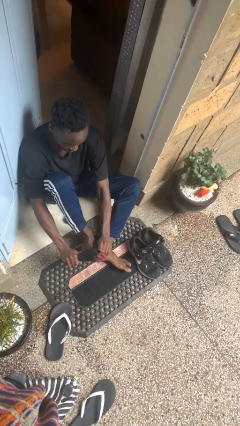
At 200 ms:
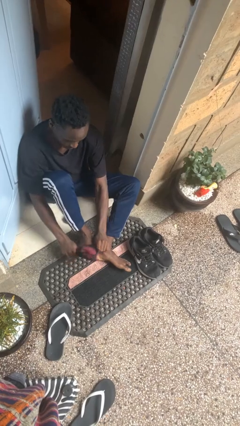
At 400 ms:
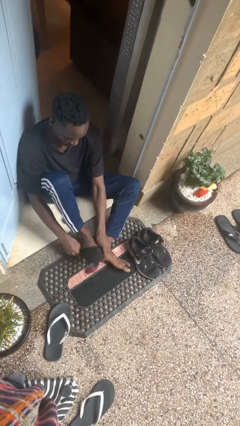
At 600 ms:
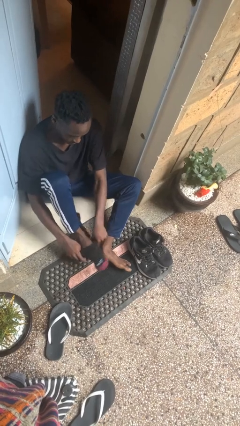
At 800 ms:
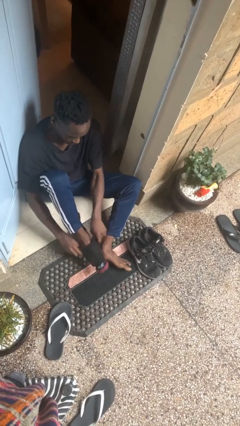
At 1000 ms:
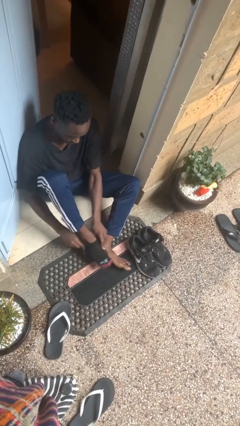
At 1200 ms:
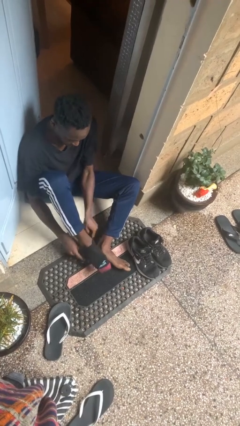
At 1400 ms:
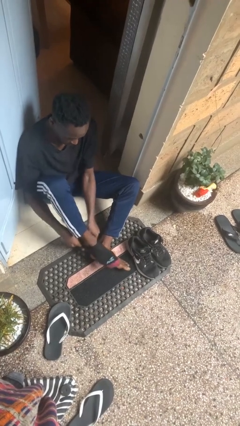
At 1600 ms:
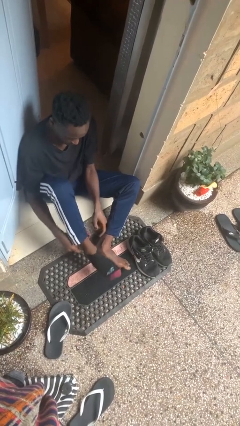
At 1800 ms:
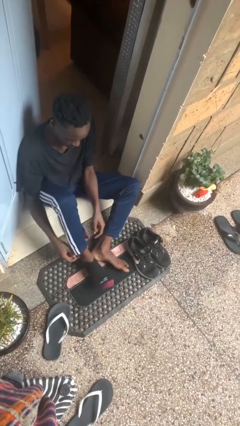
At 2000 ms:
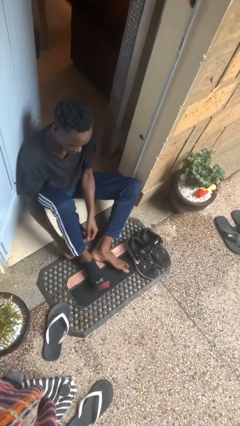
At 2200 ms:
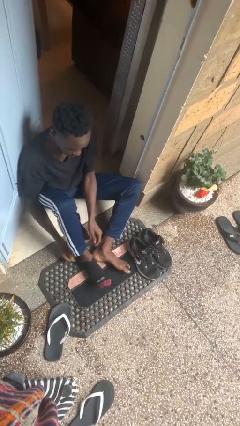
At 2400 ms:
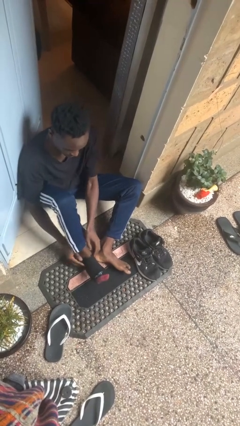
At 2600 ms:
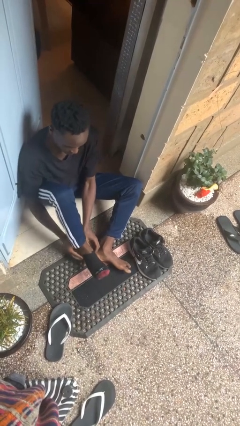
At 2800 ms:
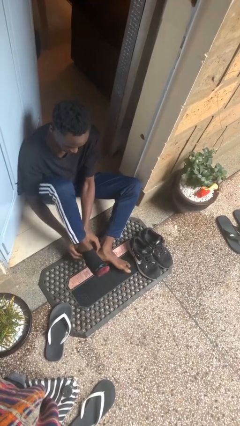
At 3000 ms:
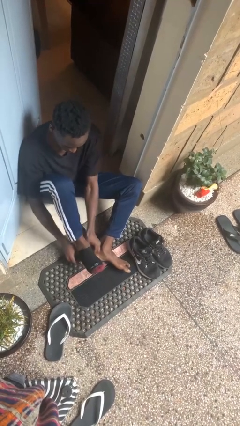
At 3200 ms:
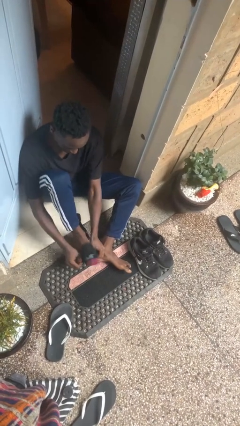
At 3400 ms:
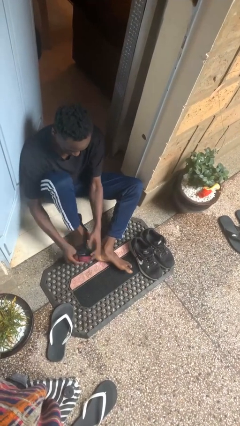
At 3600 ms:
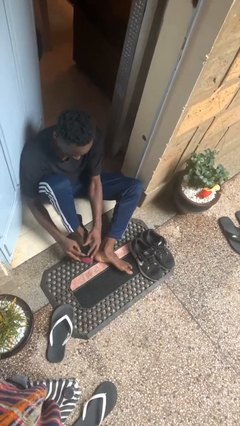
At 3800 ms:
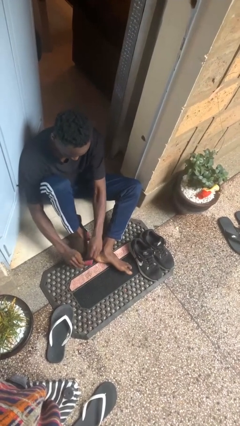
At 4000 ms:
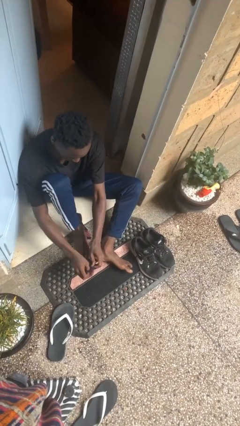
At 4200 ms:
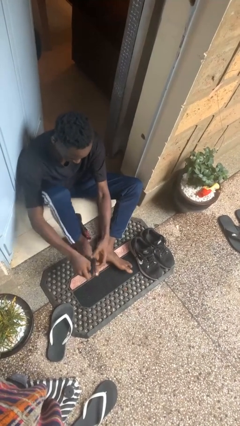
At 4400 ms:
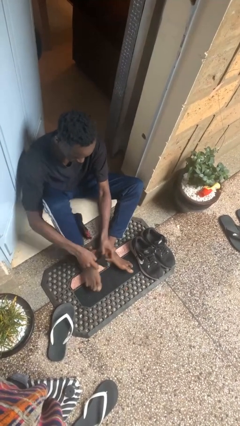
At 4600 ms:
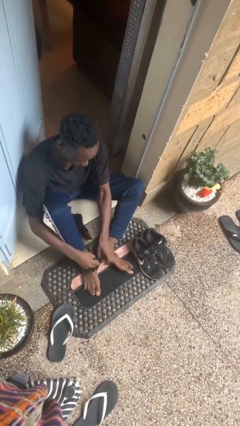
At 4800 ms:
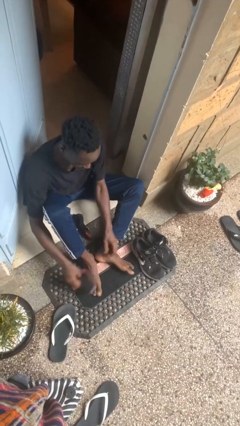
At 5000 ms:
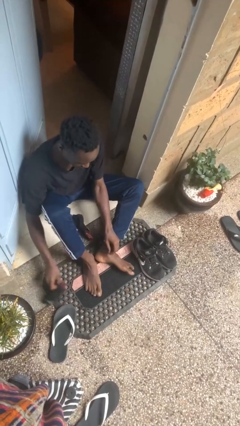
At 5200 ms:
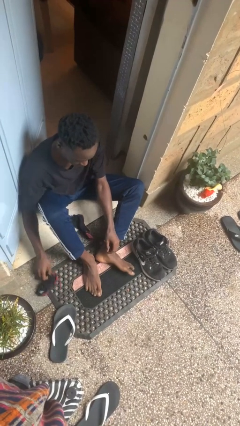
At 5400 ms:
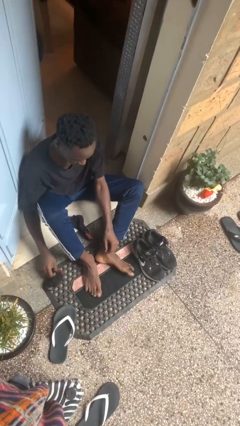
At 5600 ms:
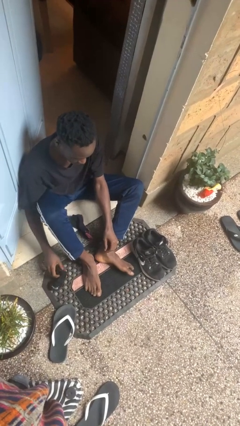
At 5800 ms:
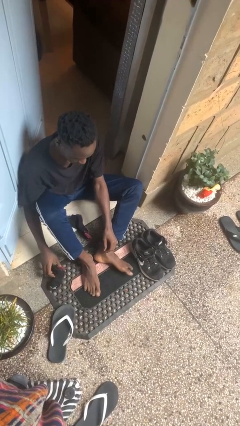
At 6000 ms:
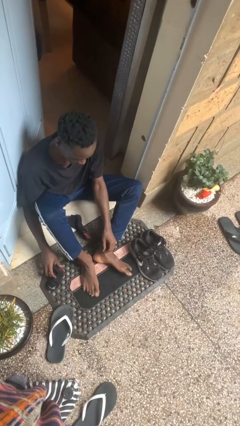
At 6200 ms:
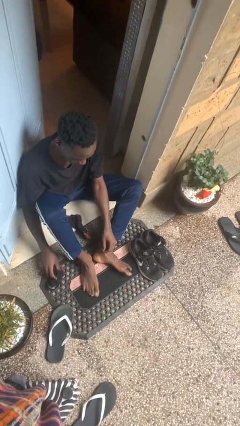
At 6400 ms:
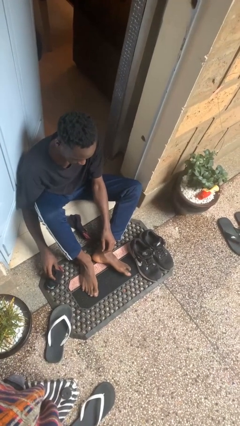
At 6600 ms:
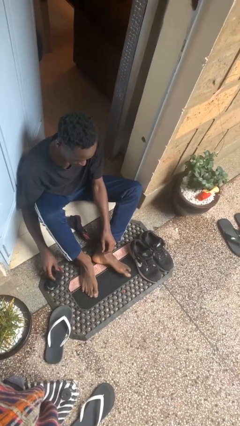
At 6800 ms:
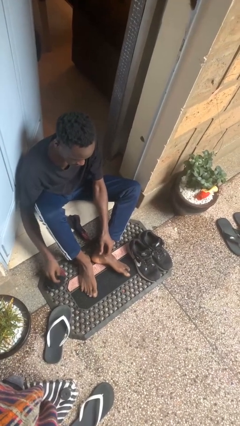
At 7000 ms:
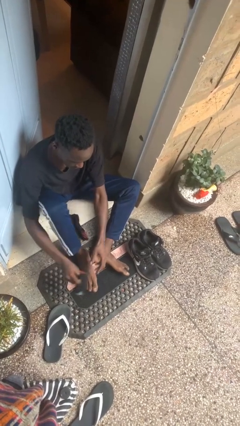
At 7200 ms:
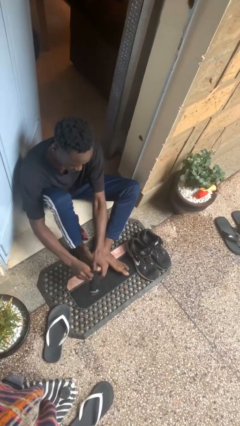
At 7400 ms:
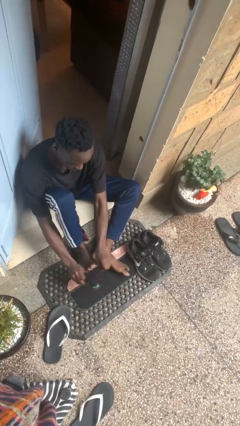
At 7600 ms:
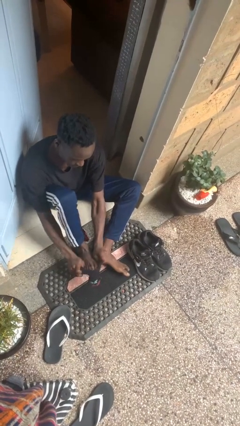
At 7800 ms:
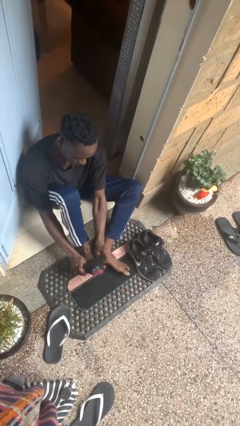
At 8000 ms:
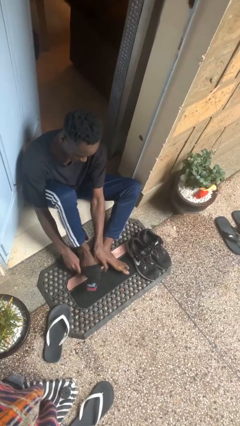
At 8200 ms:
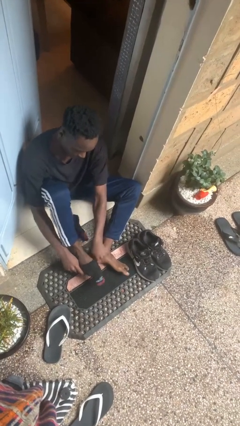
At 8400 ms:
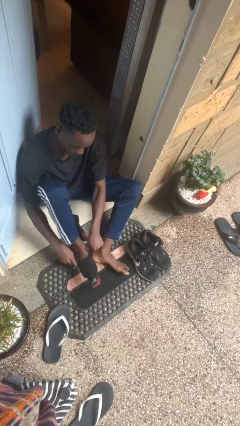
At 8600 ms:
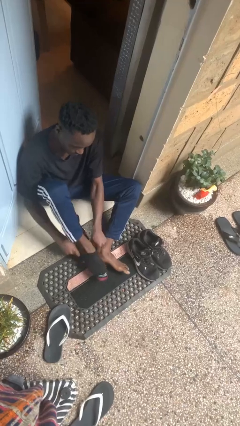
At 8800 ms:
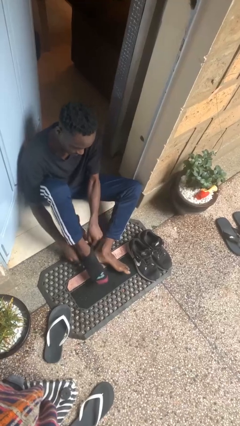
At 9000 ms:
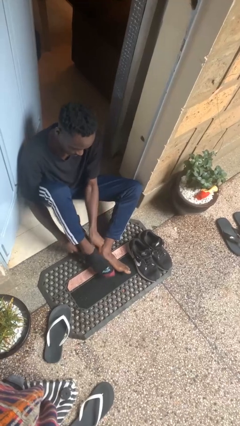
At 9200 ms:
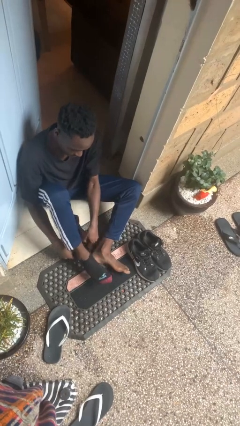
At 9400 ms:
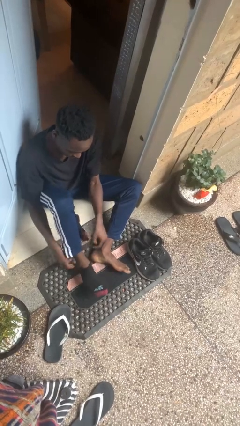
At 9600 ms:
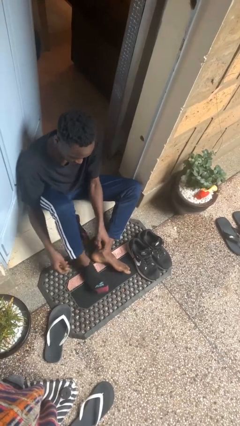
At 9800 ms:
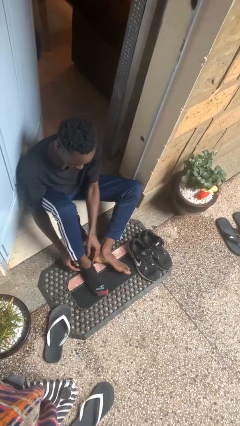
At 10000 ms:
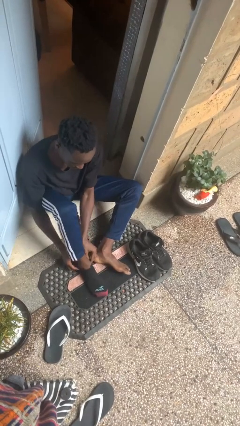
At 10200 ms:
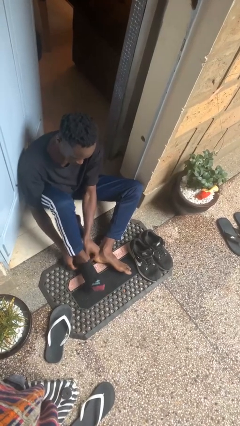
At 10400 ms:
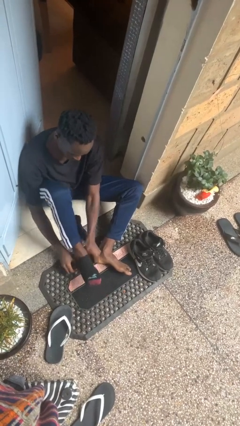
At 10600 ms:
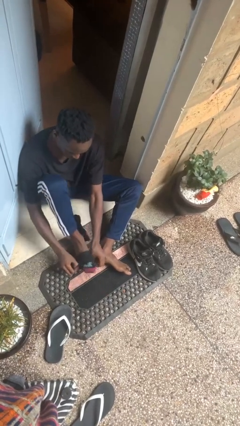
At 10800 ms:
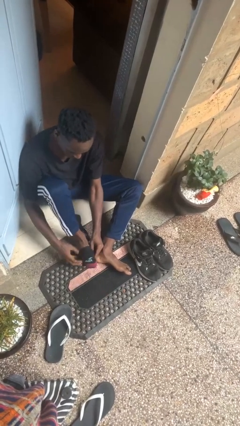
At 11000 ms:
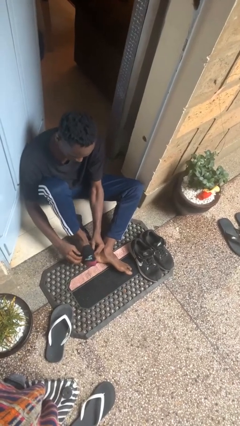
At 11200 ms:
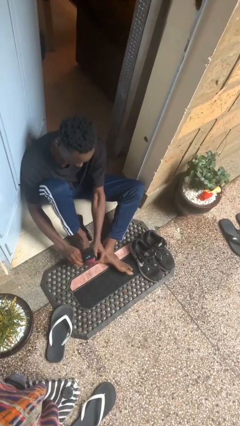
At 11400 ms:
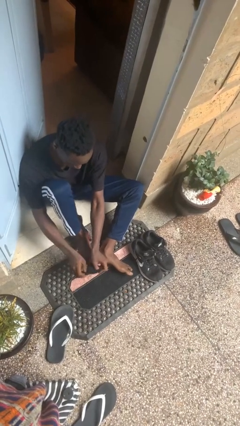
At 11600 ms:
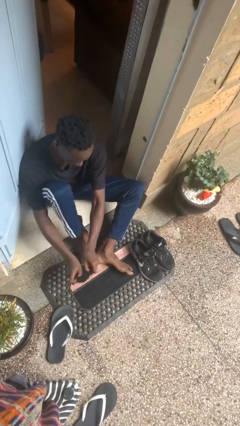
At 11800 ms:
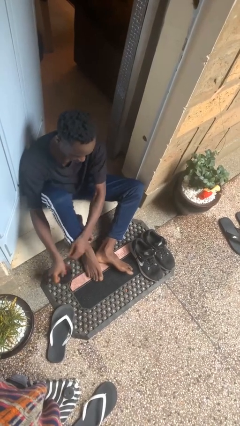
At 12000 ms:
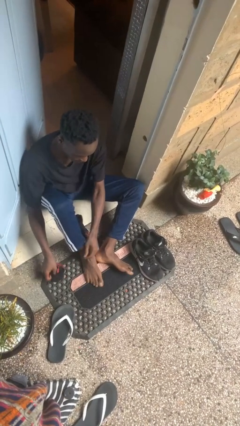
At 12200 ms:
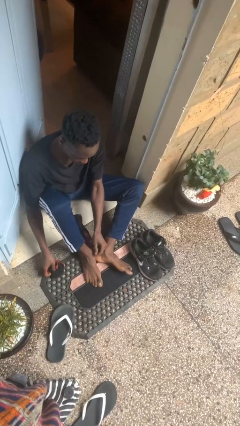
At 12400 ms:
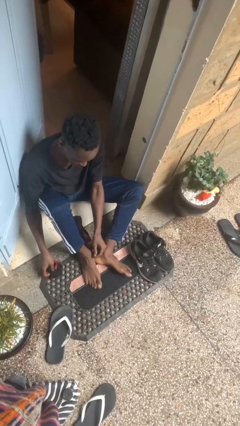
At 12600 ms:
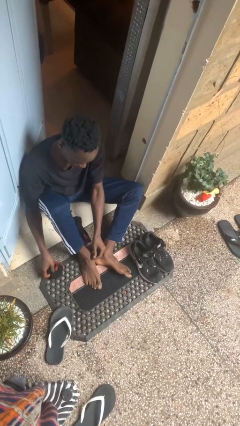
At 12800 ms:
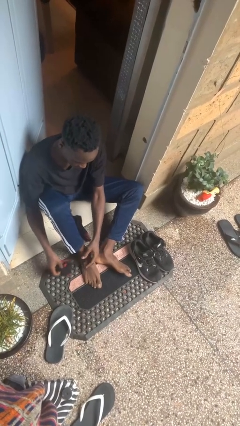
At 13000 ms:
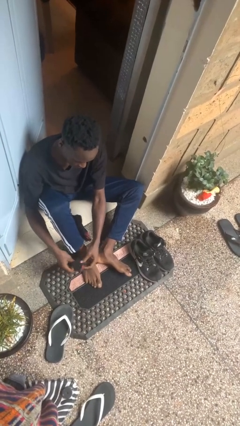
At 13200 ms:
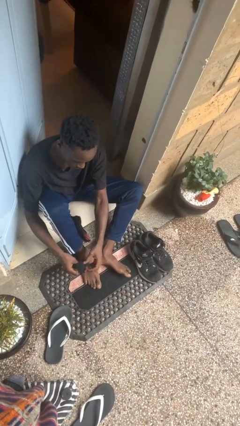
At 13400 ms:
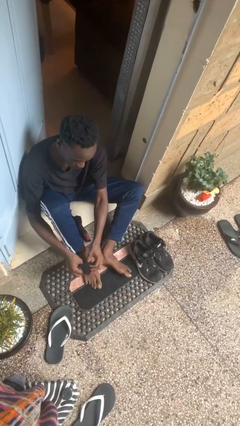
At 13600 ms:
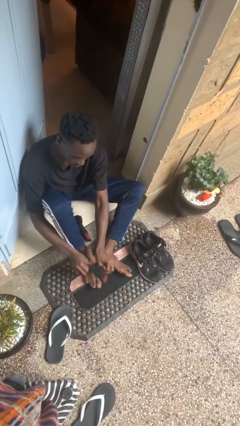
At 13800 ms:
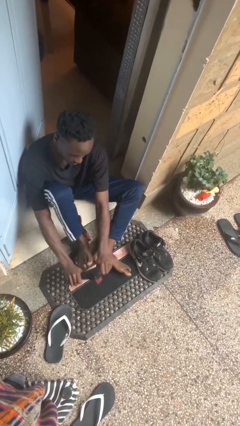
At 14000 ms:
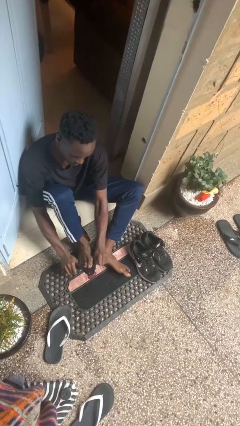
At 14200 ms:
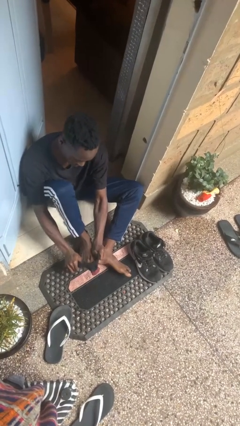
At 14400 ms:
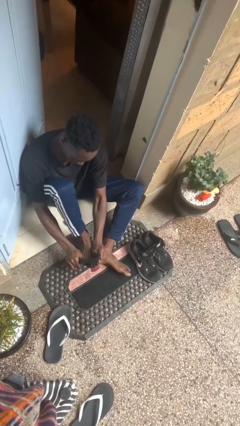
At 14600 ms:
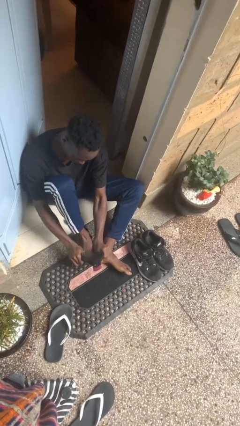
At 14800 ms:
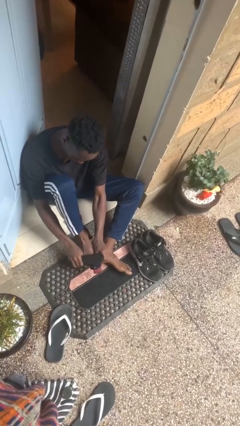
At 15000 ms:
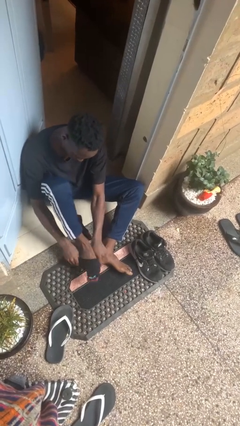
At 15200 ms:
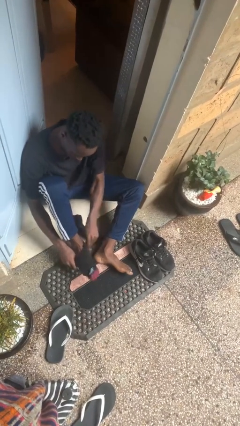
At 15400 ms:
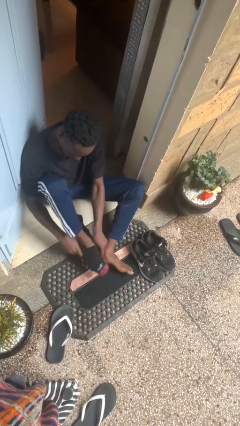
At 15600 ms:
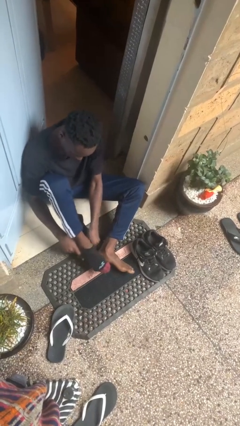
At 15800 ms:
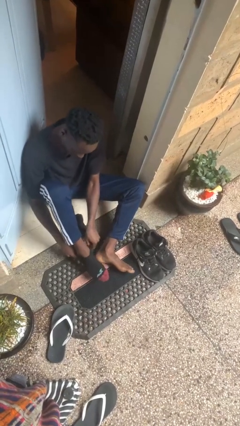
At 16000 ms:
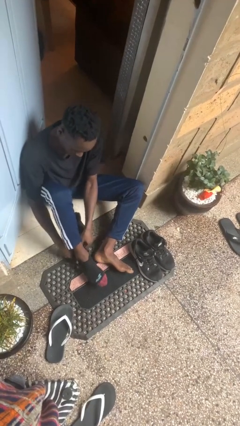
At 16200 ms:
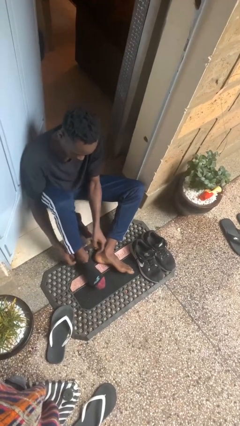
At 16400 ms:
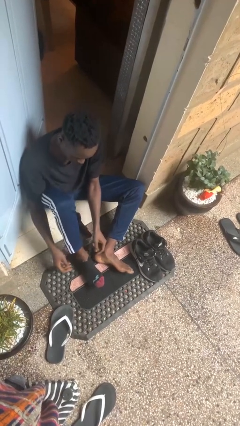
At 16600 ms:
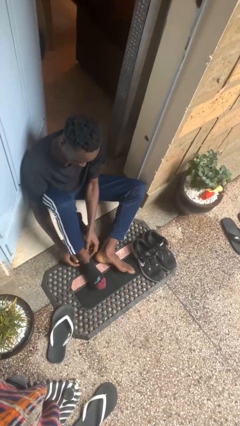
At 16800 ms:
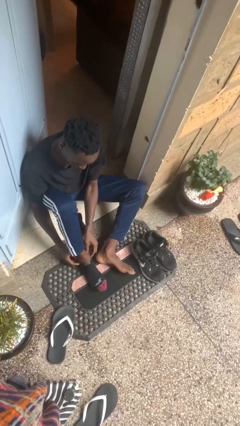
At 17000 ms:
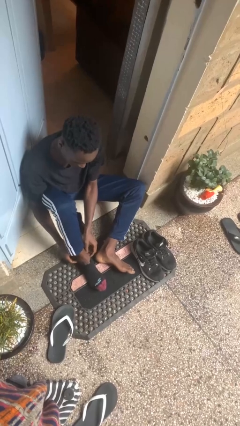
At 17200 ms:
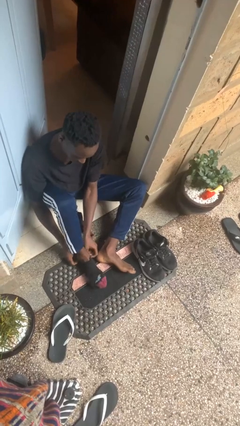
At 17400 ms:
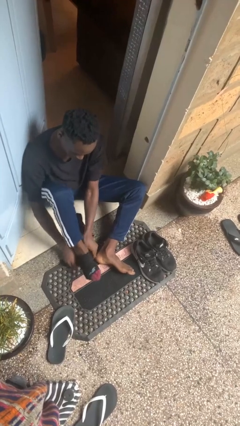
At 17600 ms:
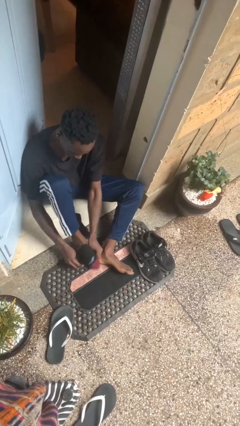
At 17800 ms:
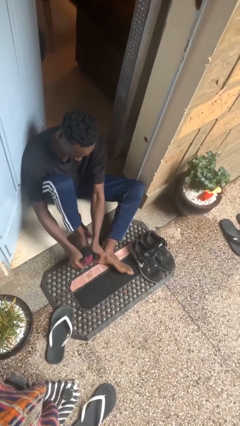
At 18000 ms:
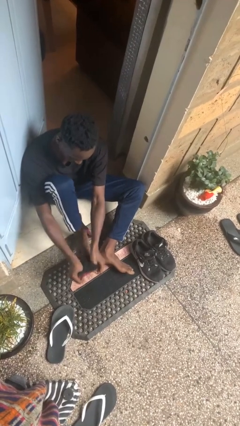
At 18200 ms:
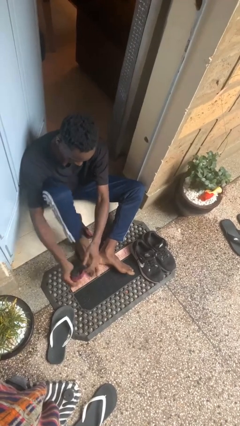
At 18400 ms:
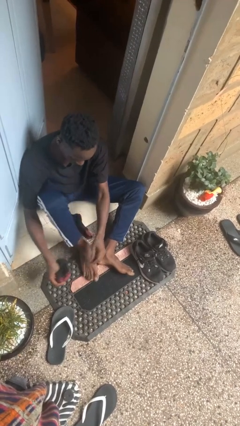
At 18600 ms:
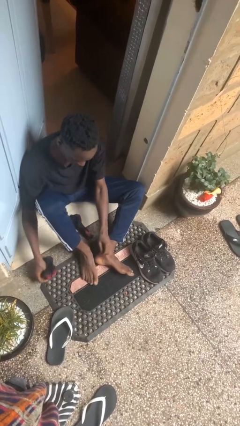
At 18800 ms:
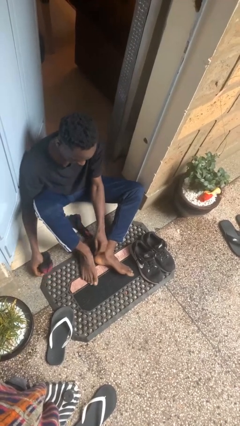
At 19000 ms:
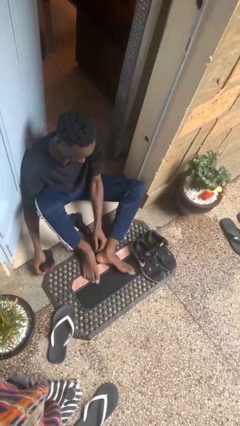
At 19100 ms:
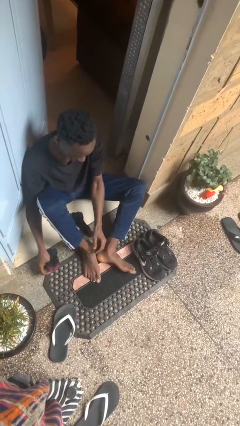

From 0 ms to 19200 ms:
person puts on socks
